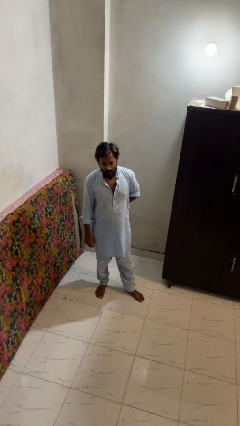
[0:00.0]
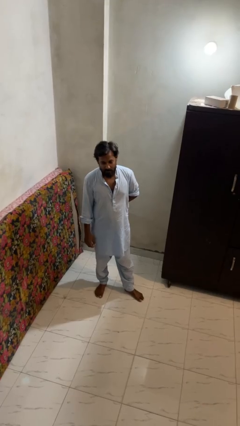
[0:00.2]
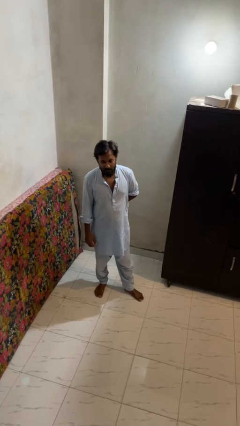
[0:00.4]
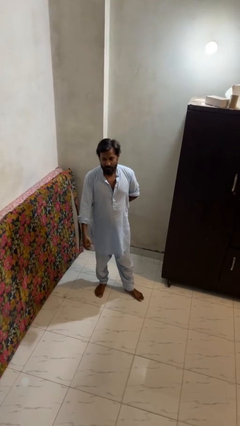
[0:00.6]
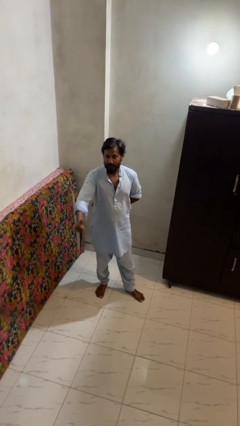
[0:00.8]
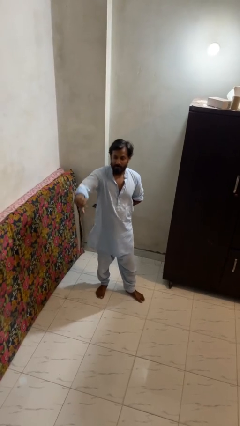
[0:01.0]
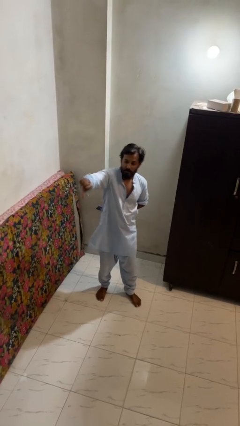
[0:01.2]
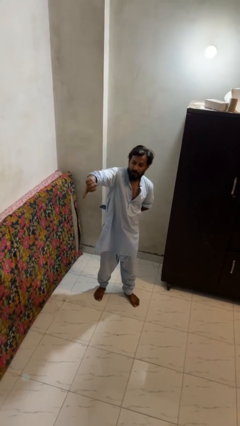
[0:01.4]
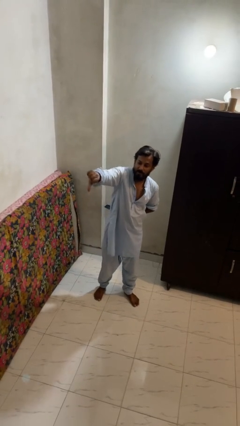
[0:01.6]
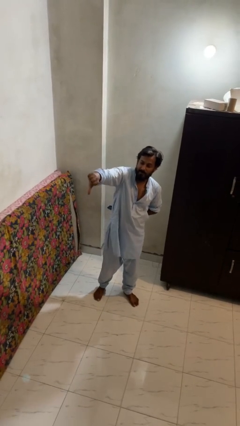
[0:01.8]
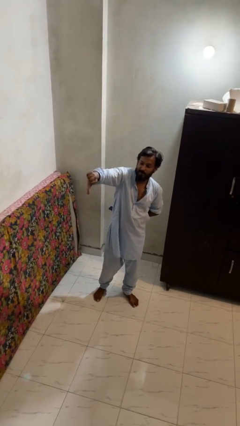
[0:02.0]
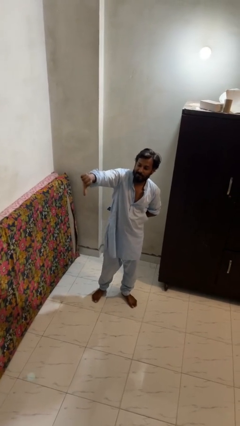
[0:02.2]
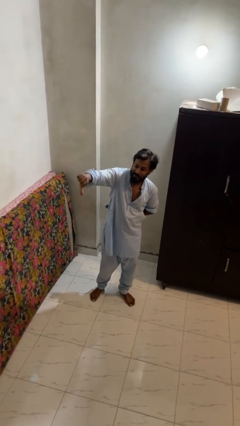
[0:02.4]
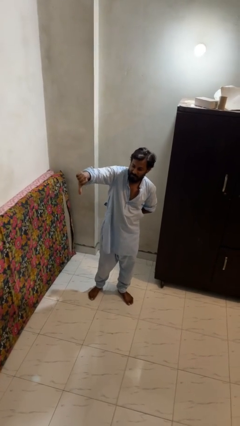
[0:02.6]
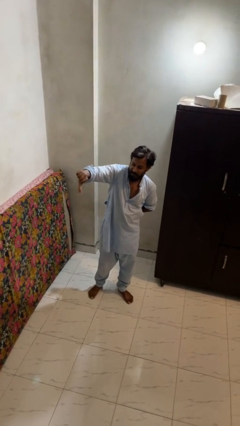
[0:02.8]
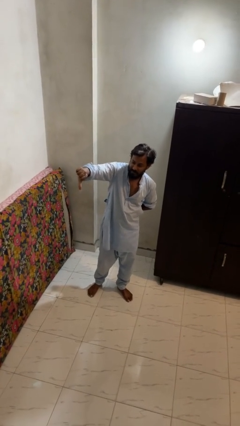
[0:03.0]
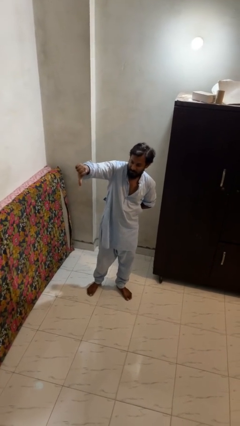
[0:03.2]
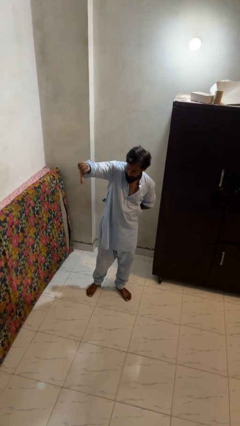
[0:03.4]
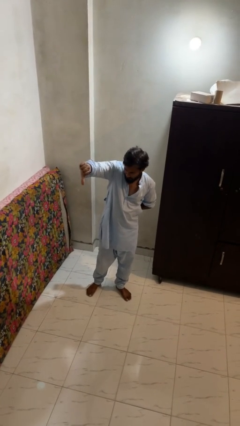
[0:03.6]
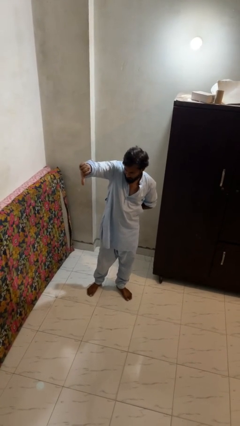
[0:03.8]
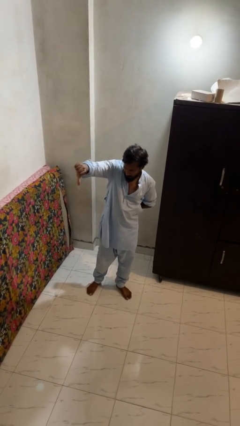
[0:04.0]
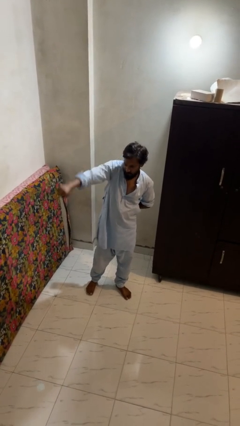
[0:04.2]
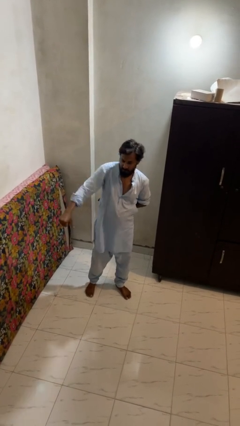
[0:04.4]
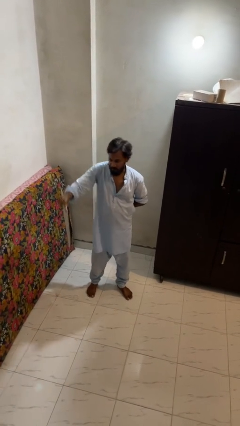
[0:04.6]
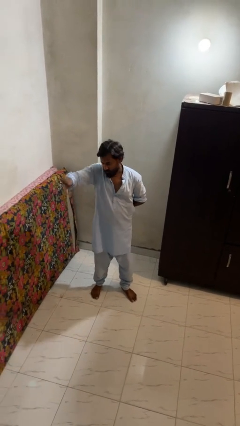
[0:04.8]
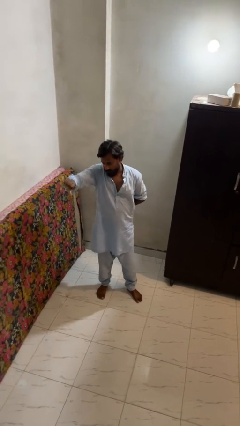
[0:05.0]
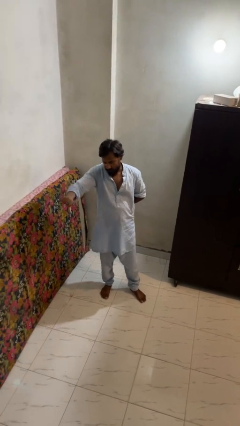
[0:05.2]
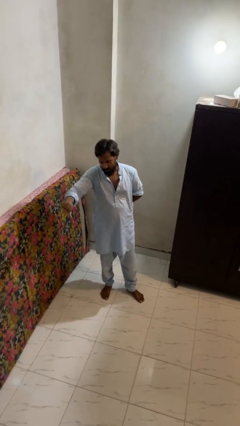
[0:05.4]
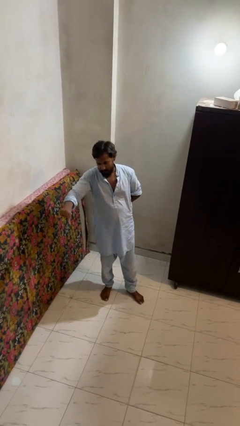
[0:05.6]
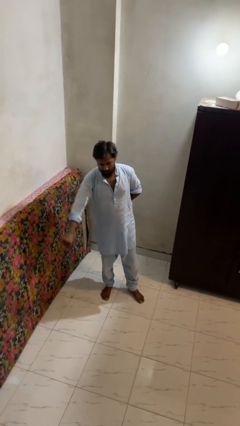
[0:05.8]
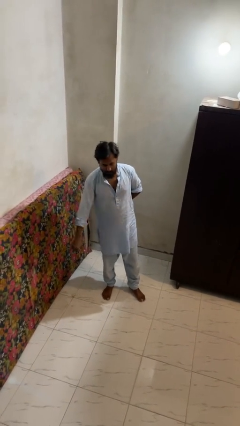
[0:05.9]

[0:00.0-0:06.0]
person gestures thumbs down

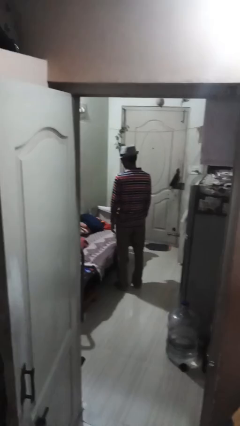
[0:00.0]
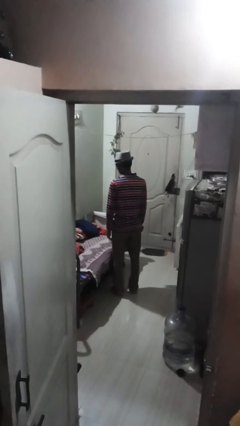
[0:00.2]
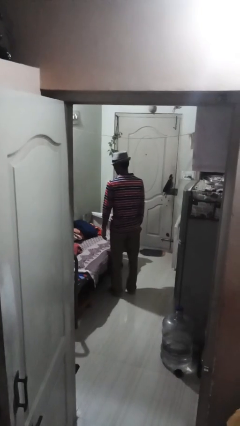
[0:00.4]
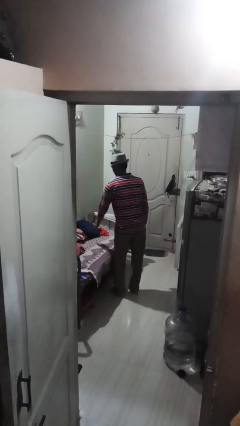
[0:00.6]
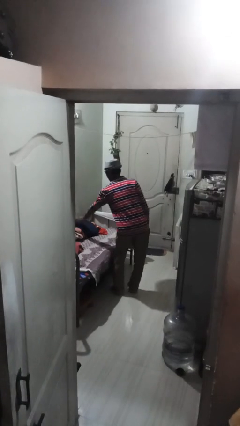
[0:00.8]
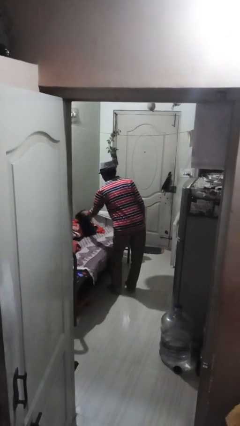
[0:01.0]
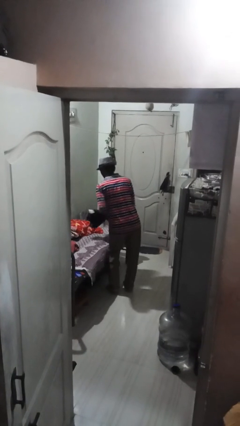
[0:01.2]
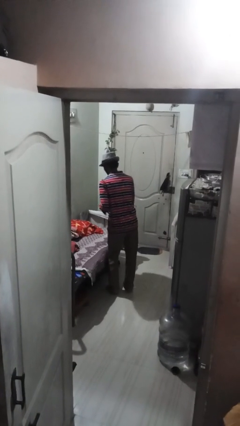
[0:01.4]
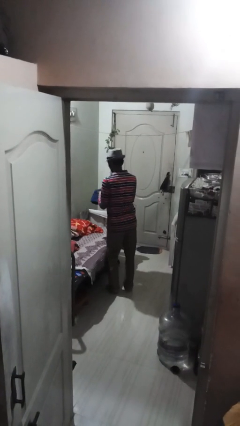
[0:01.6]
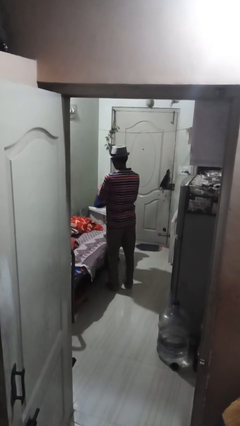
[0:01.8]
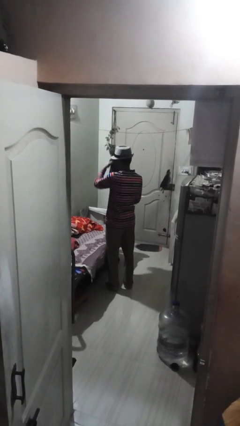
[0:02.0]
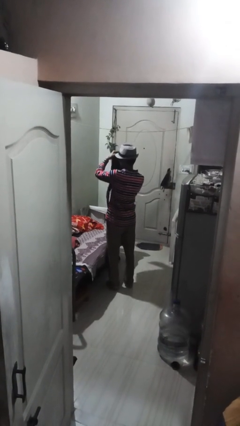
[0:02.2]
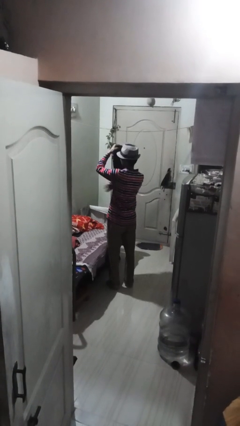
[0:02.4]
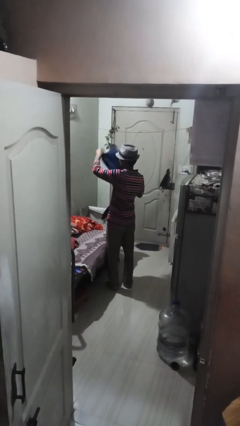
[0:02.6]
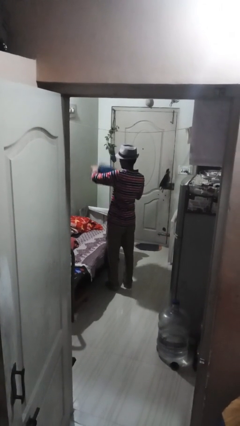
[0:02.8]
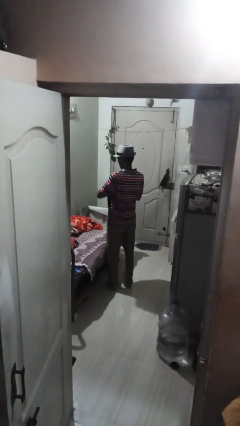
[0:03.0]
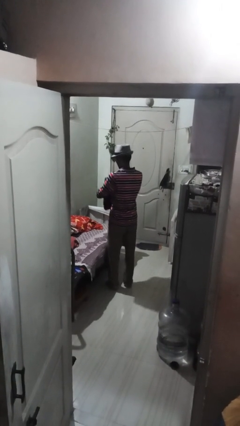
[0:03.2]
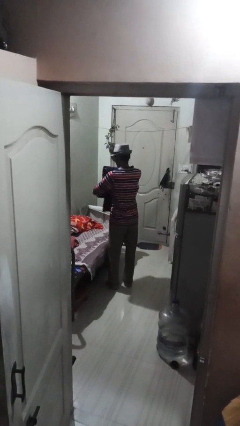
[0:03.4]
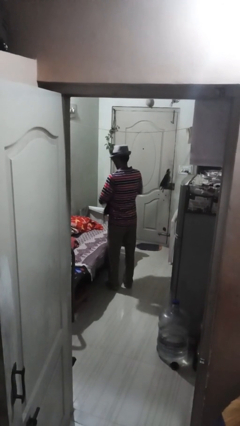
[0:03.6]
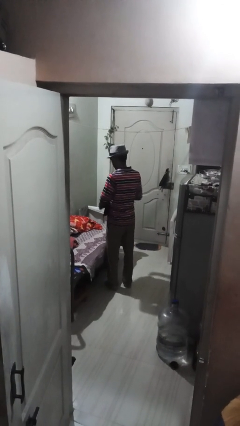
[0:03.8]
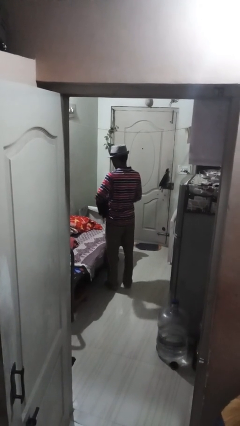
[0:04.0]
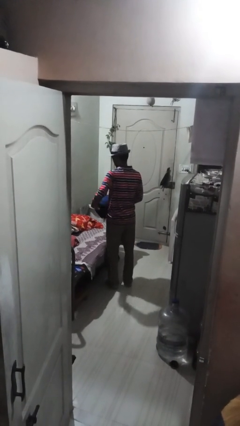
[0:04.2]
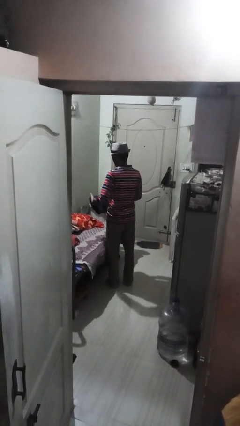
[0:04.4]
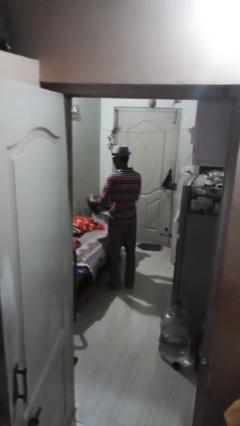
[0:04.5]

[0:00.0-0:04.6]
person folds pants

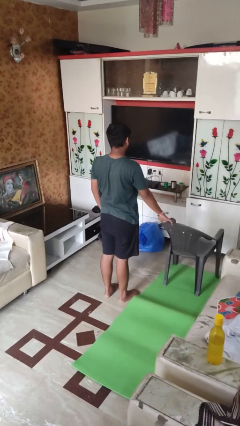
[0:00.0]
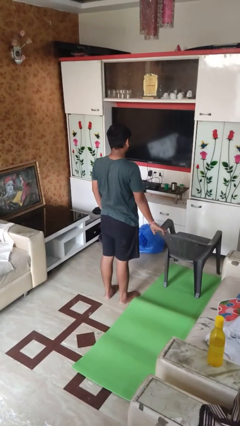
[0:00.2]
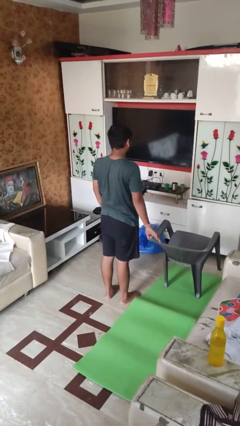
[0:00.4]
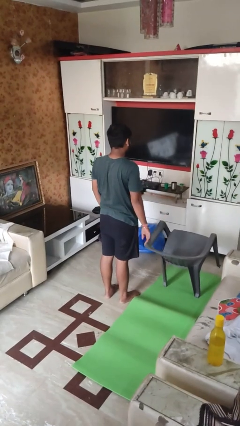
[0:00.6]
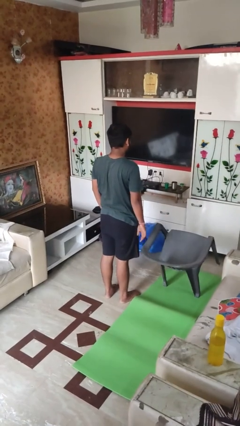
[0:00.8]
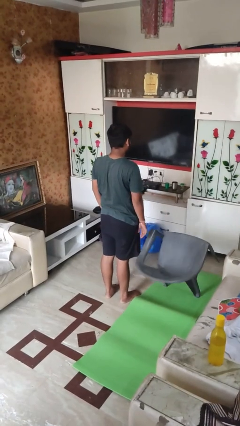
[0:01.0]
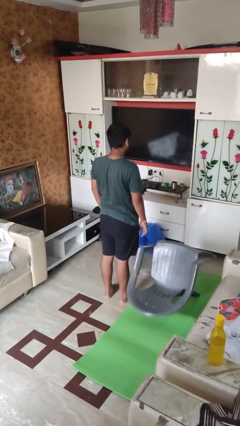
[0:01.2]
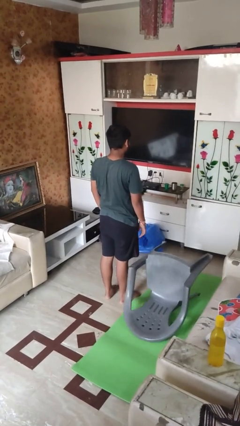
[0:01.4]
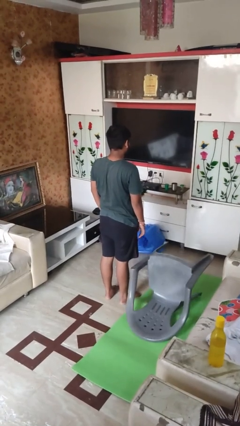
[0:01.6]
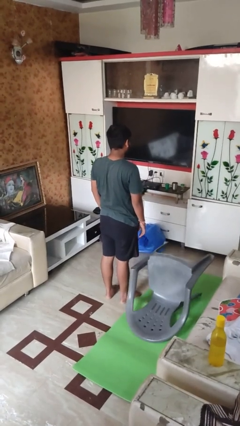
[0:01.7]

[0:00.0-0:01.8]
person knocks over furniture

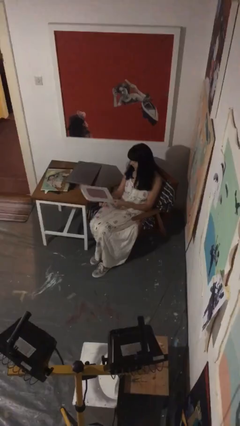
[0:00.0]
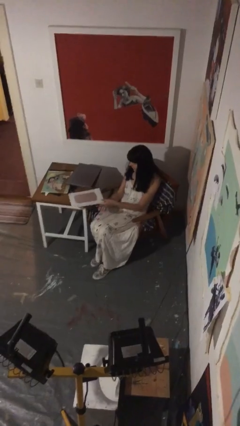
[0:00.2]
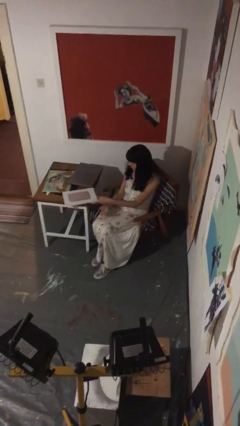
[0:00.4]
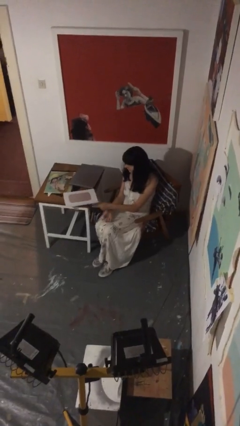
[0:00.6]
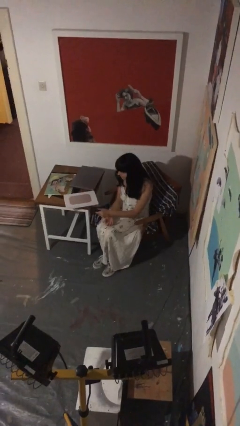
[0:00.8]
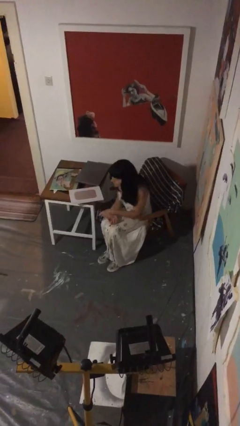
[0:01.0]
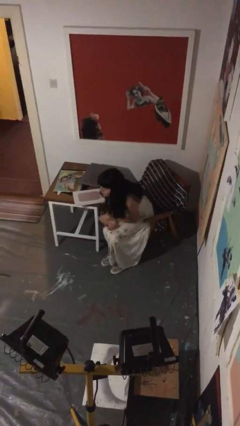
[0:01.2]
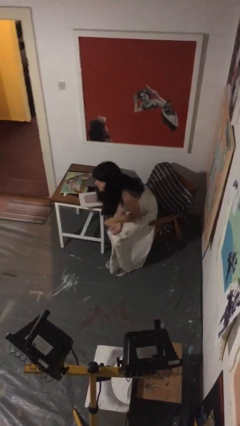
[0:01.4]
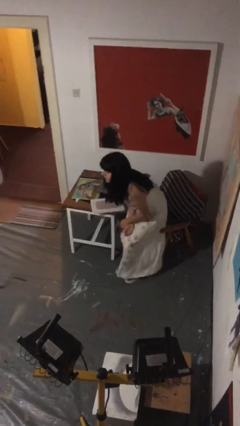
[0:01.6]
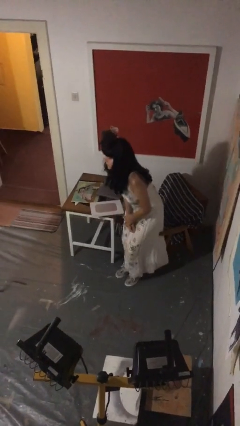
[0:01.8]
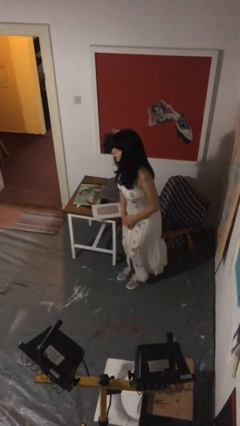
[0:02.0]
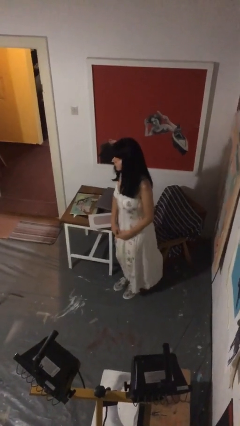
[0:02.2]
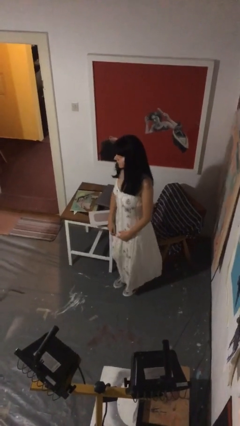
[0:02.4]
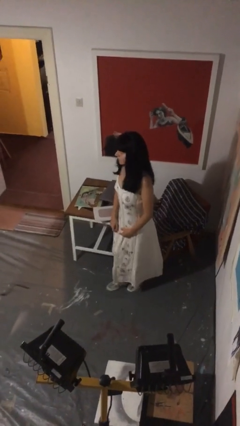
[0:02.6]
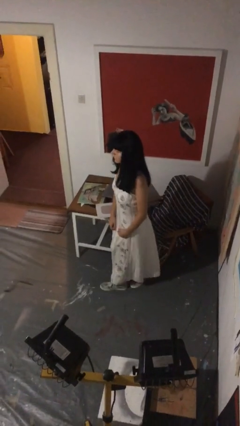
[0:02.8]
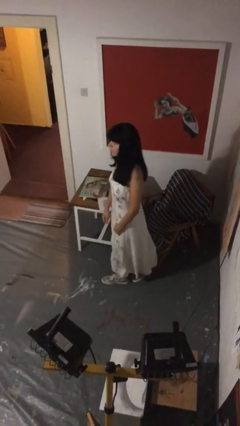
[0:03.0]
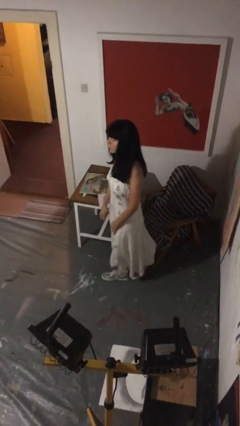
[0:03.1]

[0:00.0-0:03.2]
person stands up

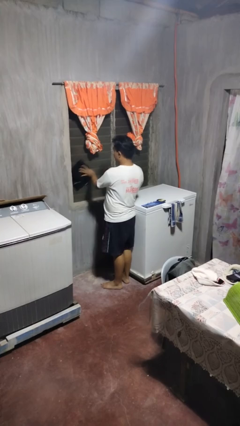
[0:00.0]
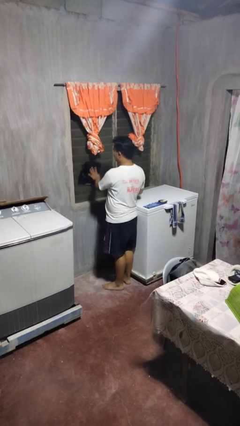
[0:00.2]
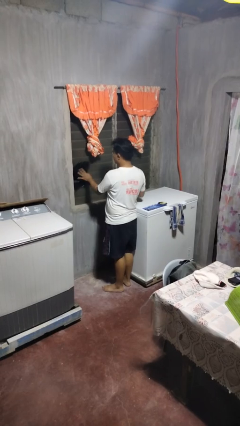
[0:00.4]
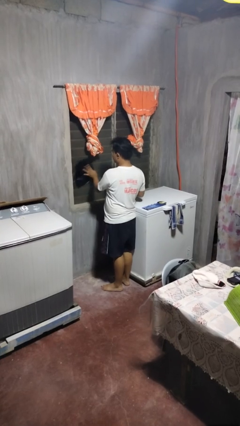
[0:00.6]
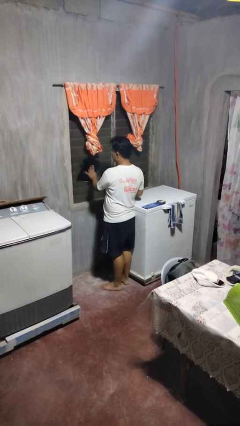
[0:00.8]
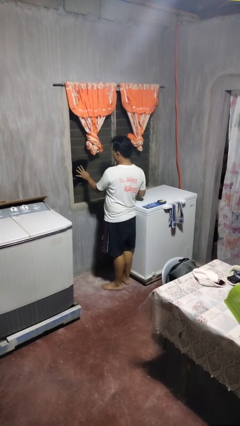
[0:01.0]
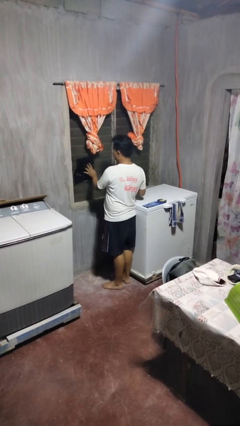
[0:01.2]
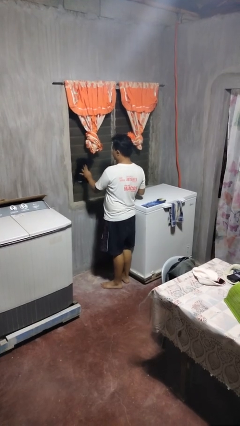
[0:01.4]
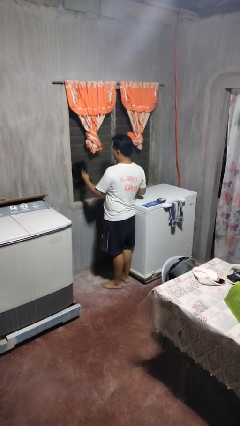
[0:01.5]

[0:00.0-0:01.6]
person washes window

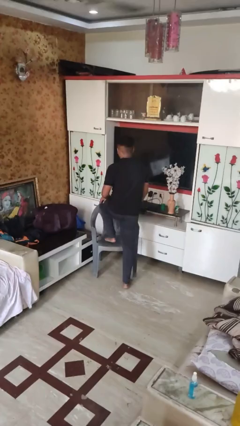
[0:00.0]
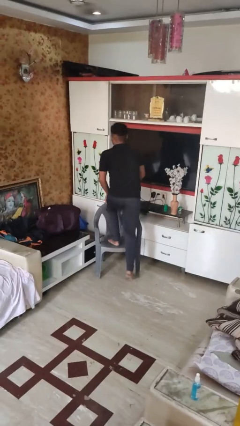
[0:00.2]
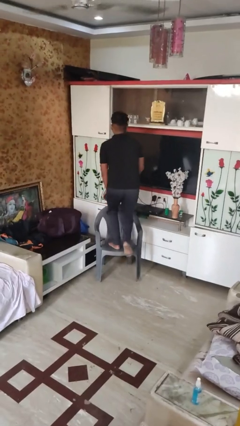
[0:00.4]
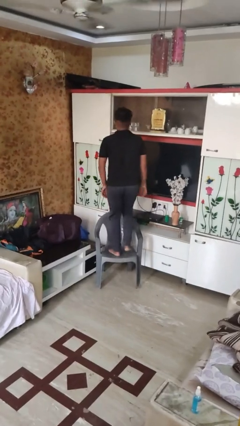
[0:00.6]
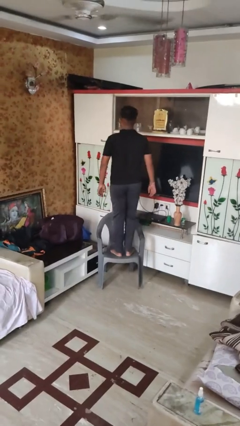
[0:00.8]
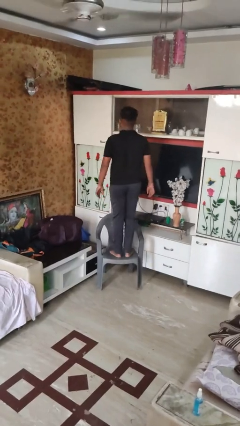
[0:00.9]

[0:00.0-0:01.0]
person climbs on chair
